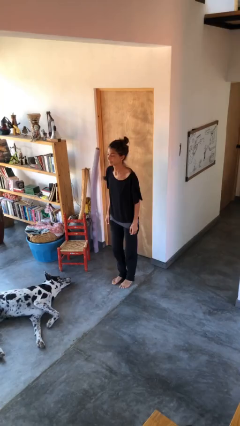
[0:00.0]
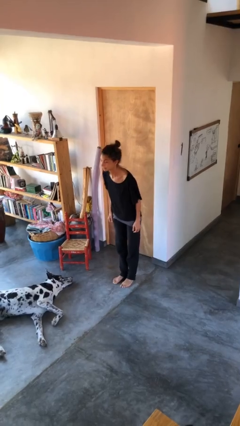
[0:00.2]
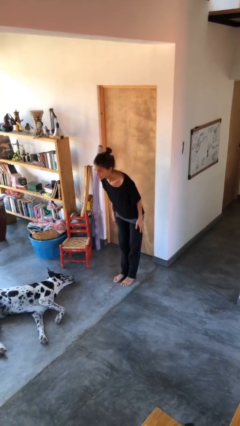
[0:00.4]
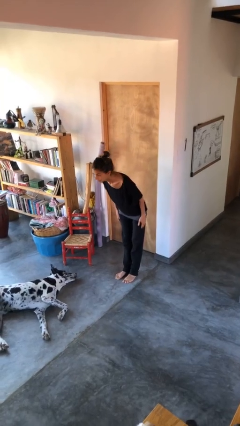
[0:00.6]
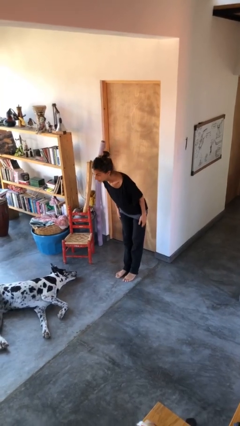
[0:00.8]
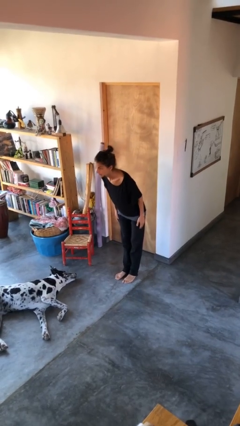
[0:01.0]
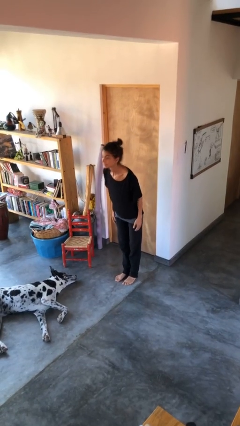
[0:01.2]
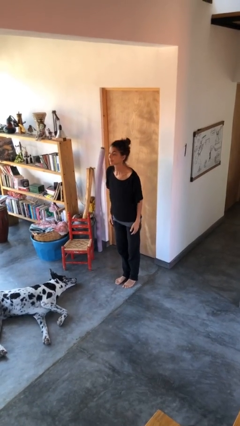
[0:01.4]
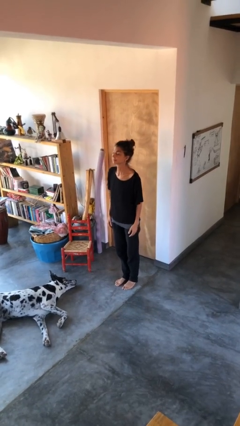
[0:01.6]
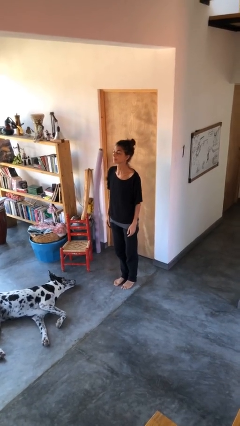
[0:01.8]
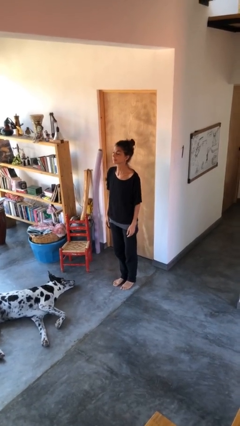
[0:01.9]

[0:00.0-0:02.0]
person bows

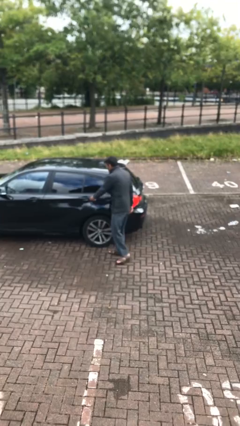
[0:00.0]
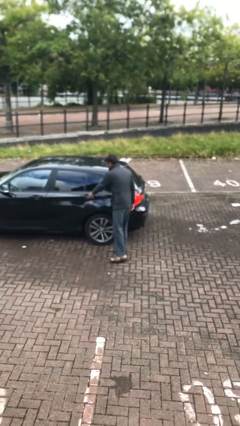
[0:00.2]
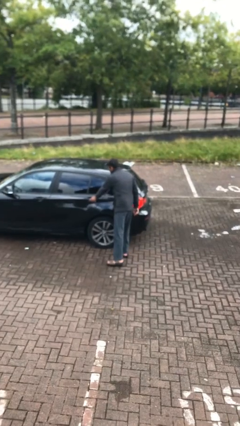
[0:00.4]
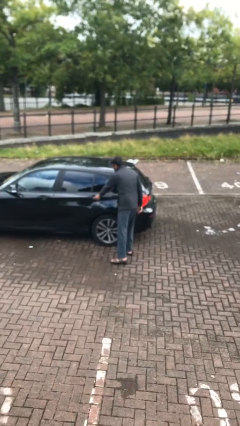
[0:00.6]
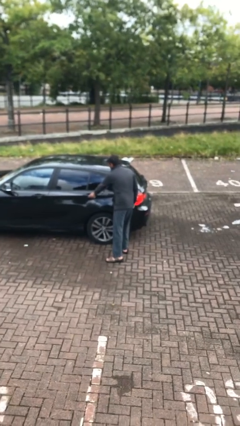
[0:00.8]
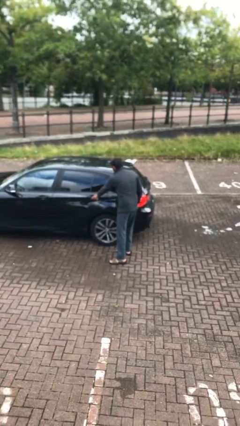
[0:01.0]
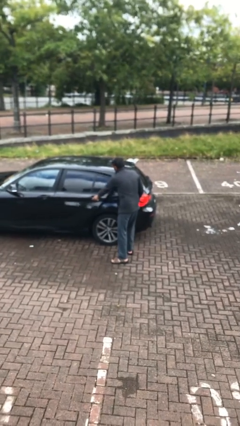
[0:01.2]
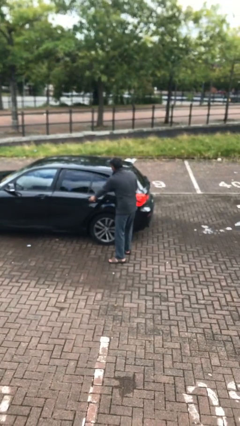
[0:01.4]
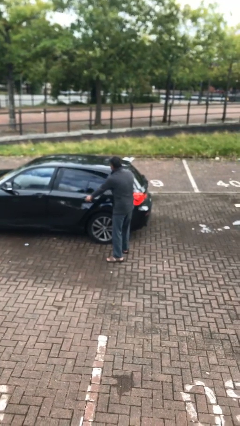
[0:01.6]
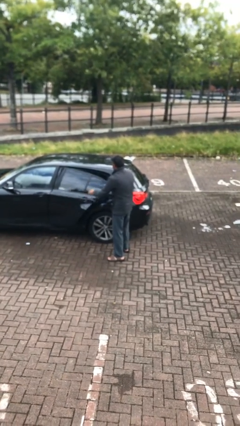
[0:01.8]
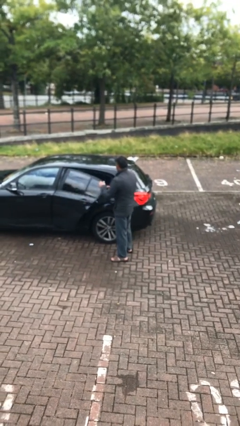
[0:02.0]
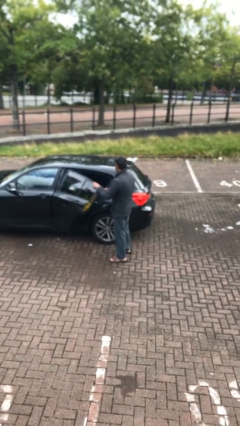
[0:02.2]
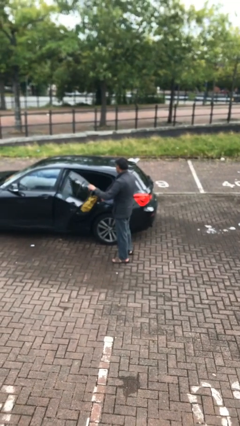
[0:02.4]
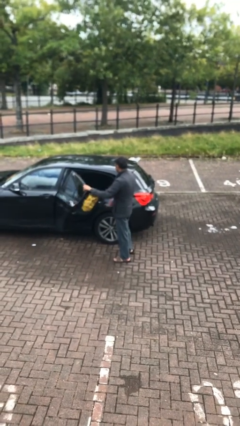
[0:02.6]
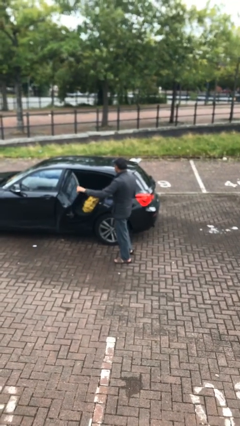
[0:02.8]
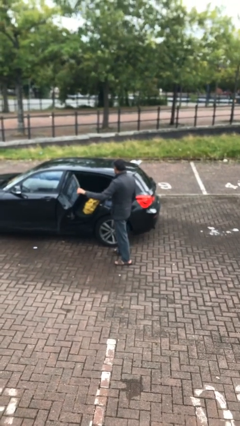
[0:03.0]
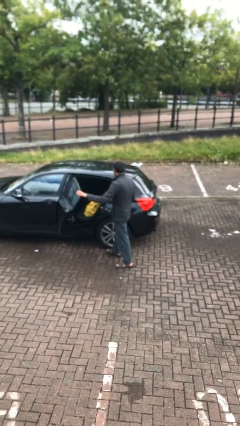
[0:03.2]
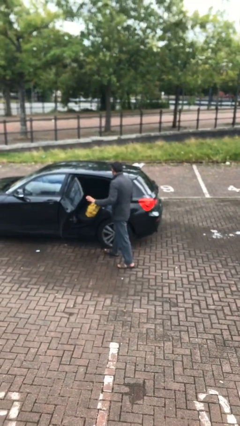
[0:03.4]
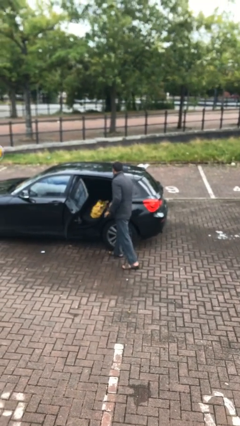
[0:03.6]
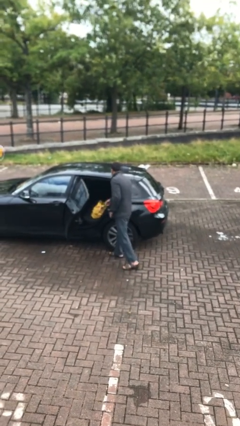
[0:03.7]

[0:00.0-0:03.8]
person opens car door

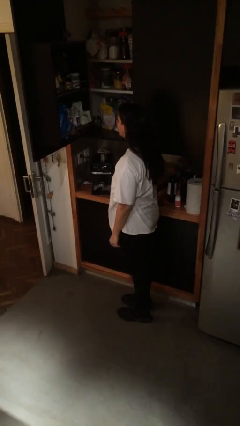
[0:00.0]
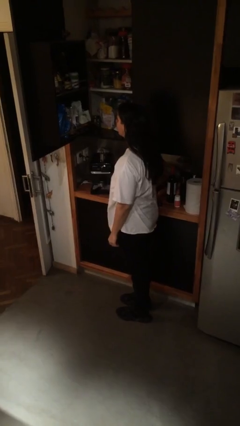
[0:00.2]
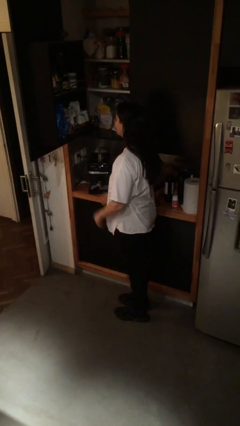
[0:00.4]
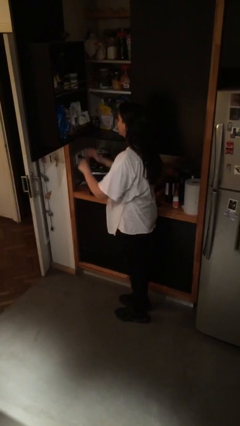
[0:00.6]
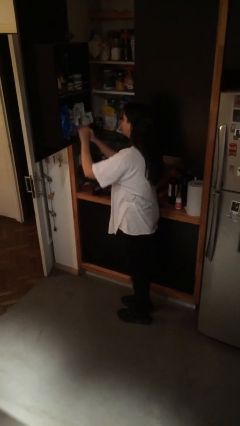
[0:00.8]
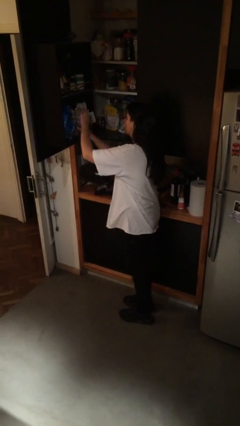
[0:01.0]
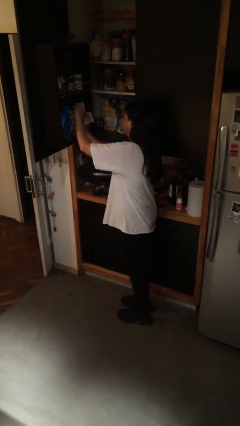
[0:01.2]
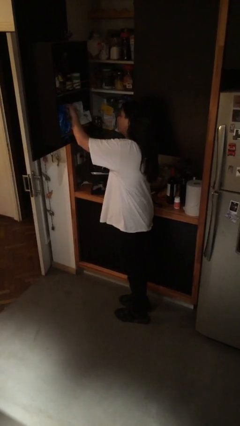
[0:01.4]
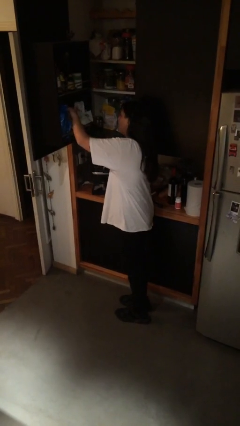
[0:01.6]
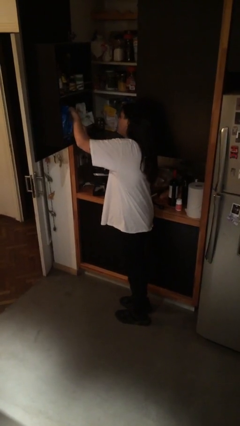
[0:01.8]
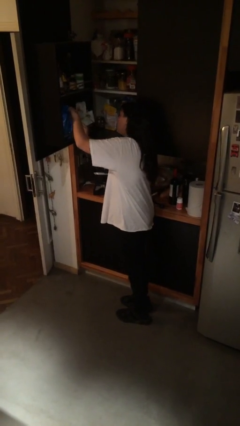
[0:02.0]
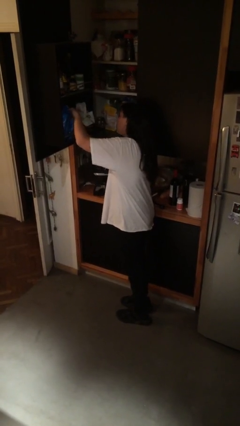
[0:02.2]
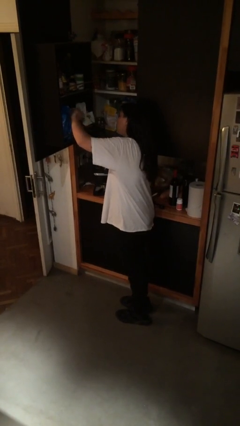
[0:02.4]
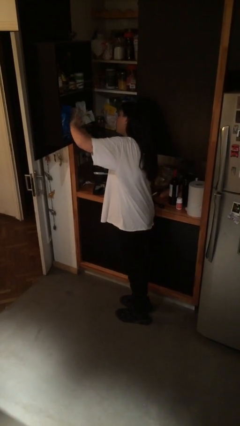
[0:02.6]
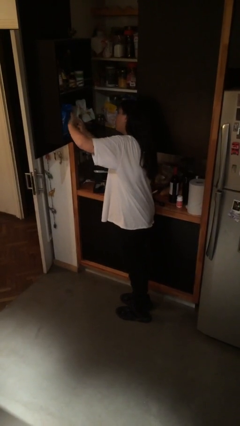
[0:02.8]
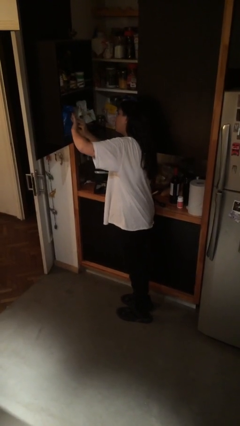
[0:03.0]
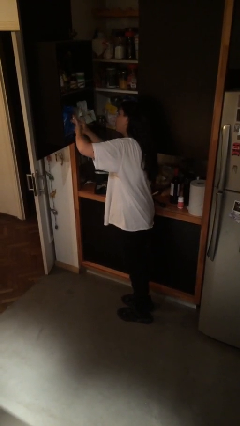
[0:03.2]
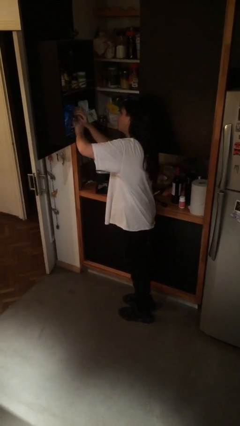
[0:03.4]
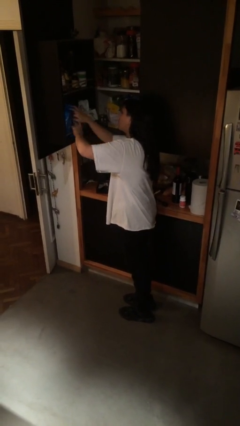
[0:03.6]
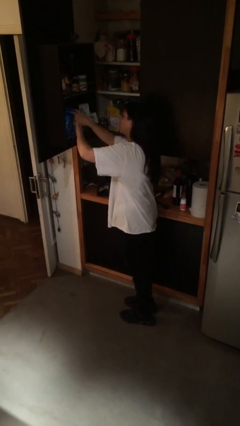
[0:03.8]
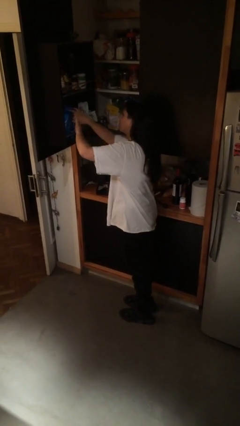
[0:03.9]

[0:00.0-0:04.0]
person searches in cabinet

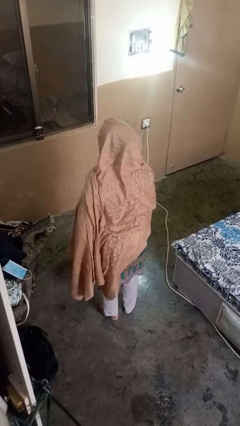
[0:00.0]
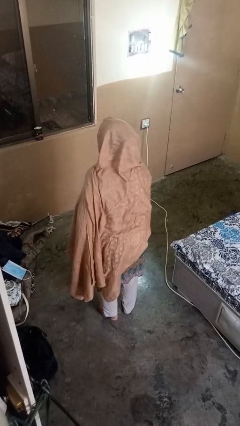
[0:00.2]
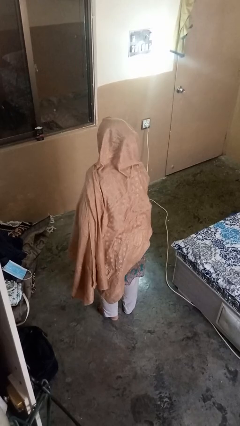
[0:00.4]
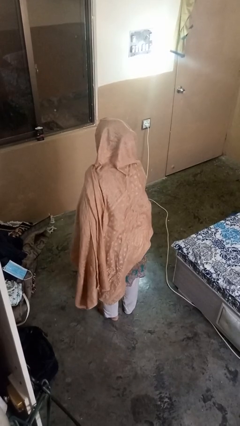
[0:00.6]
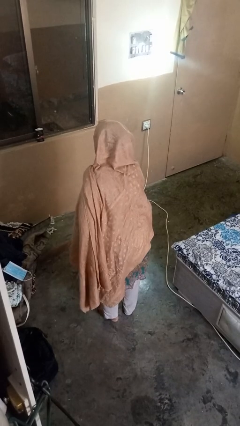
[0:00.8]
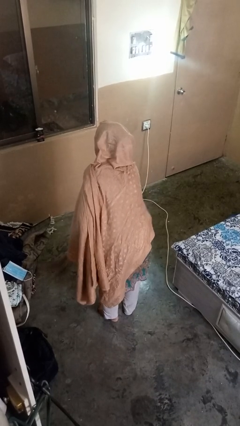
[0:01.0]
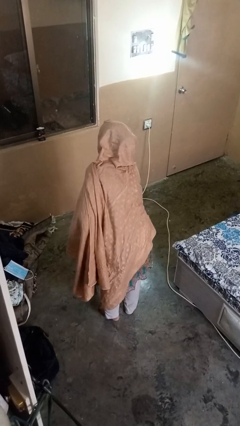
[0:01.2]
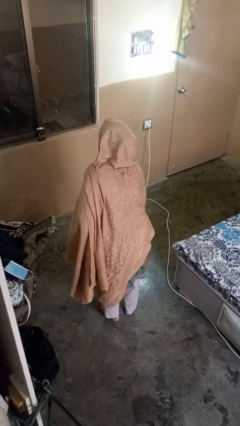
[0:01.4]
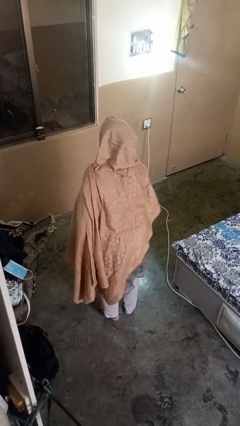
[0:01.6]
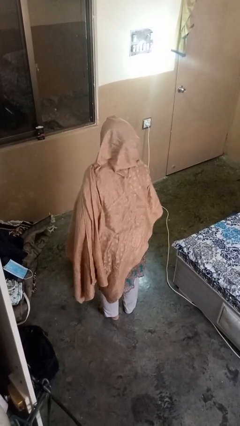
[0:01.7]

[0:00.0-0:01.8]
person sweeps floor

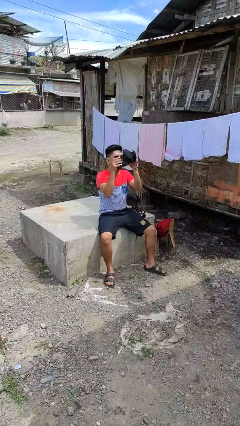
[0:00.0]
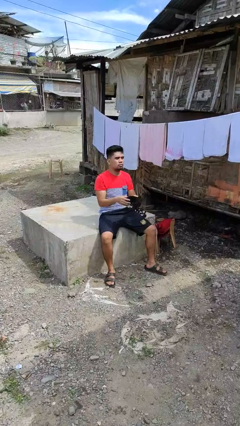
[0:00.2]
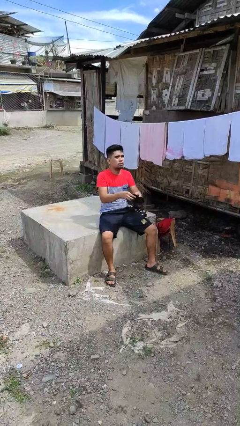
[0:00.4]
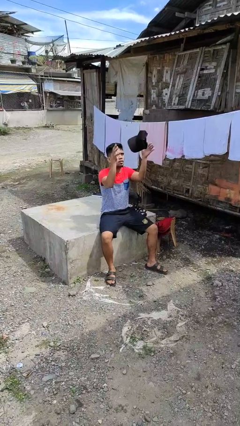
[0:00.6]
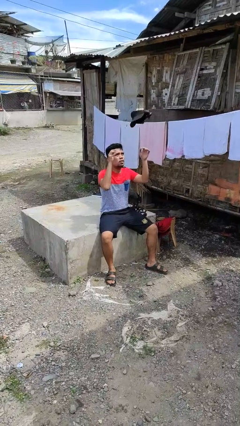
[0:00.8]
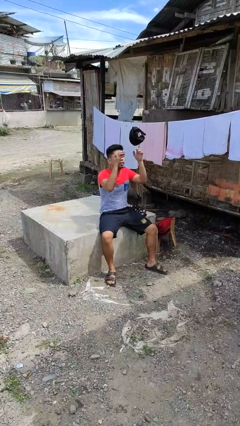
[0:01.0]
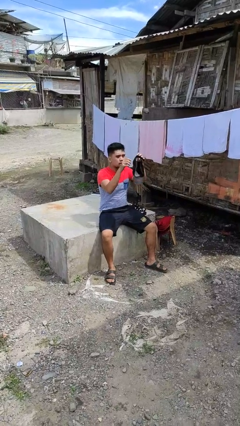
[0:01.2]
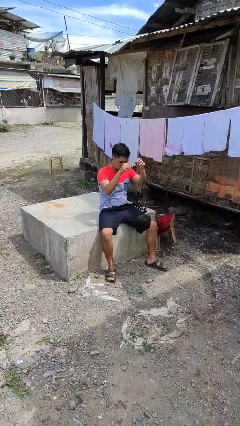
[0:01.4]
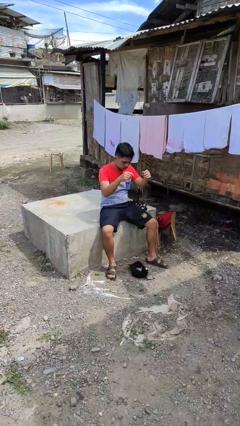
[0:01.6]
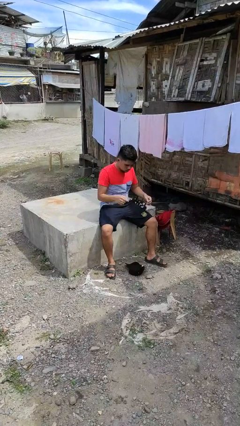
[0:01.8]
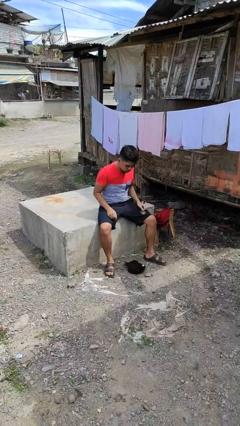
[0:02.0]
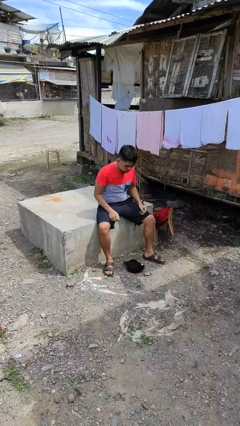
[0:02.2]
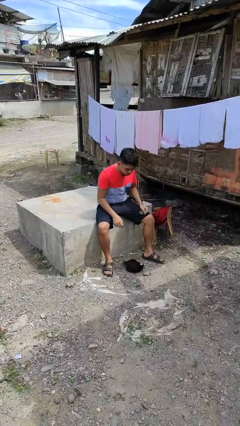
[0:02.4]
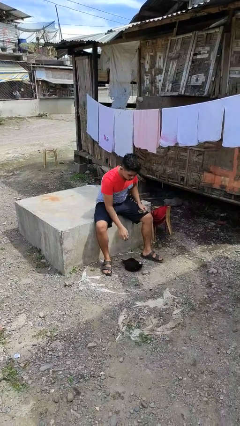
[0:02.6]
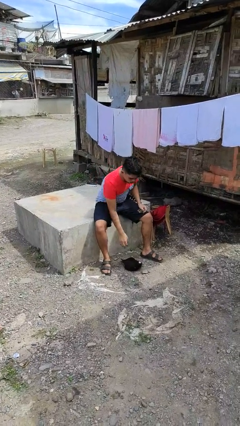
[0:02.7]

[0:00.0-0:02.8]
person drops object

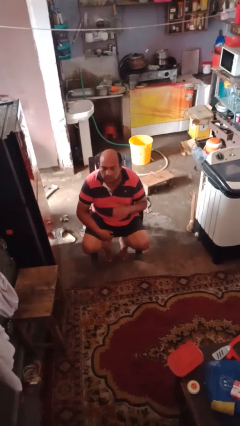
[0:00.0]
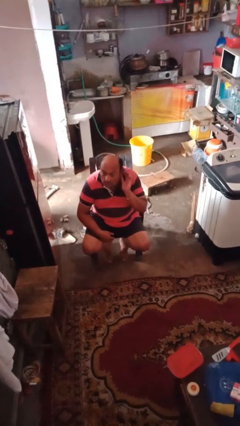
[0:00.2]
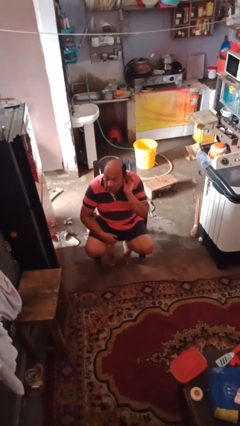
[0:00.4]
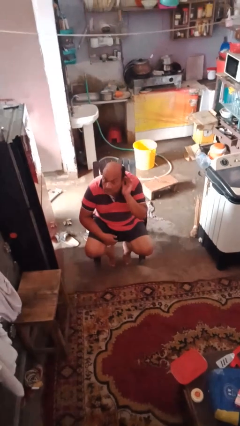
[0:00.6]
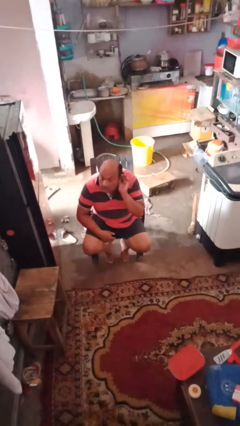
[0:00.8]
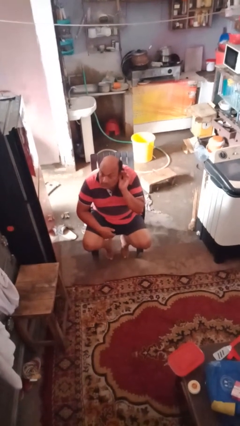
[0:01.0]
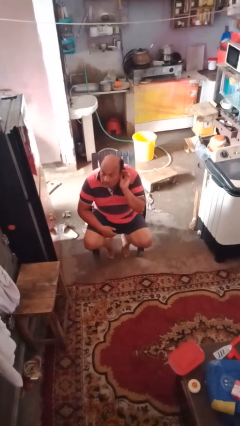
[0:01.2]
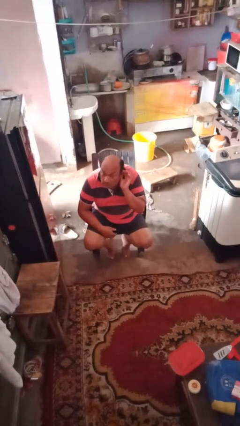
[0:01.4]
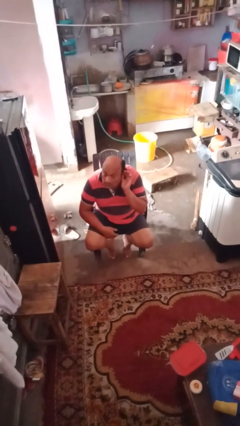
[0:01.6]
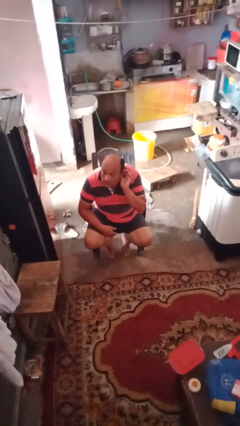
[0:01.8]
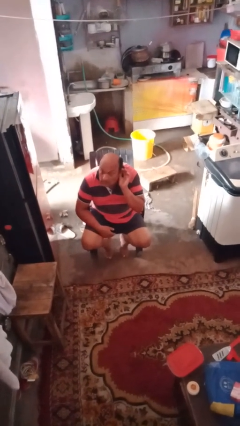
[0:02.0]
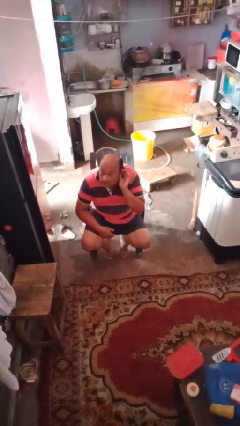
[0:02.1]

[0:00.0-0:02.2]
person gestures listen closely

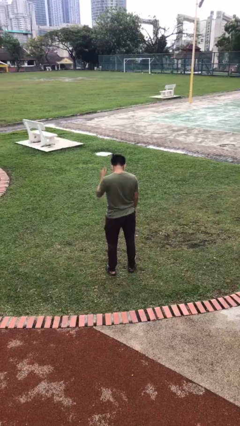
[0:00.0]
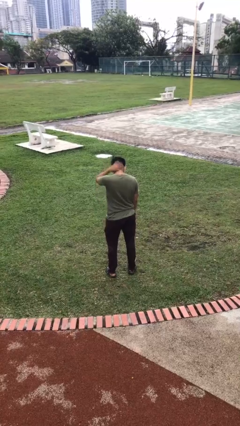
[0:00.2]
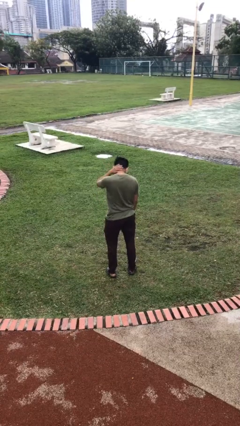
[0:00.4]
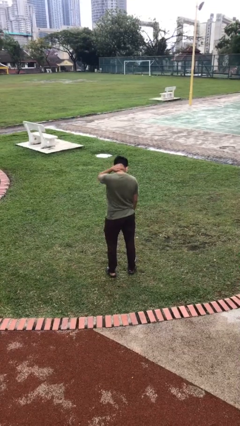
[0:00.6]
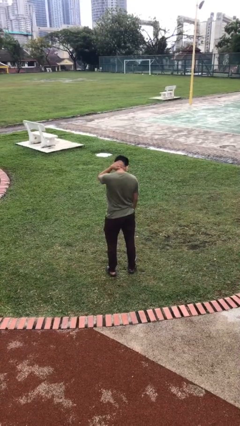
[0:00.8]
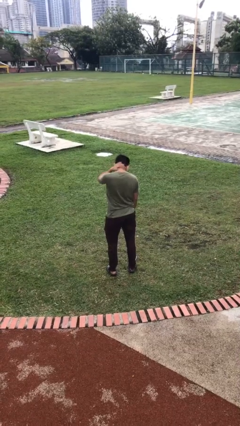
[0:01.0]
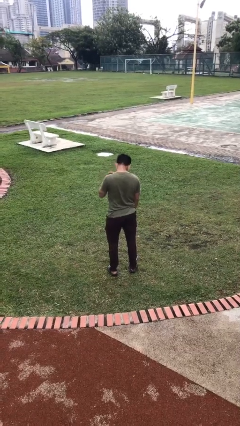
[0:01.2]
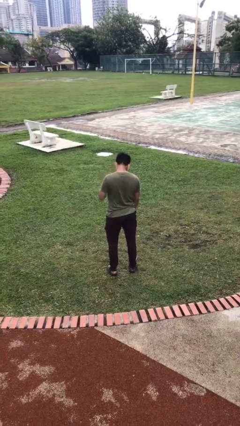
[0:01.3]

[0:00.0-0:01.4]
person rubs neck
